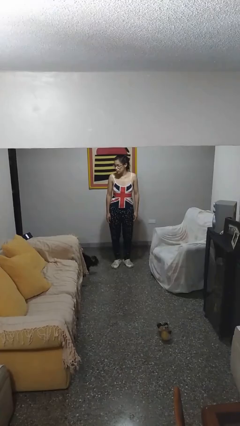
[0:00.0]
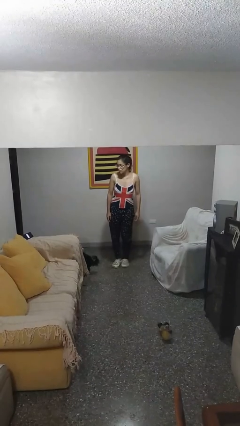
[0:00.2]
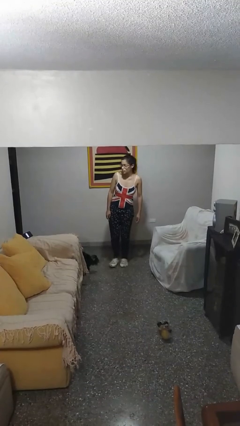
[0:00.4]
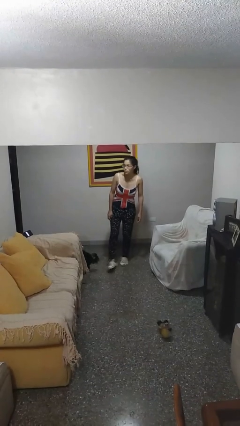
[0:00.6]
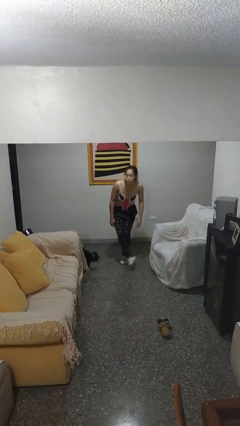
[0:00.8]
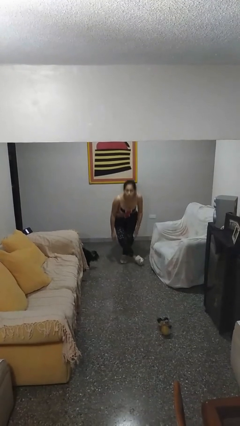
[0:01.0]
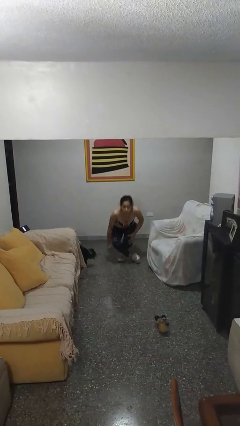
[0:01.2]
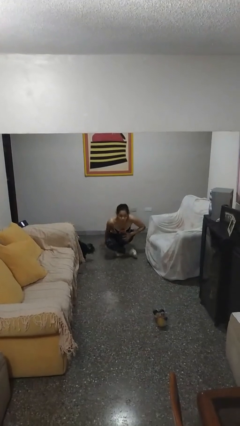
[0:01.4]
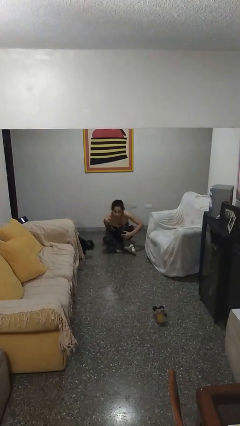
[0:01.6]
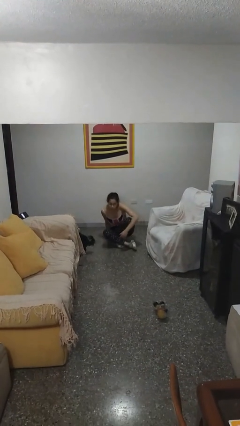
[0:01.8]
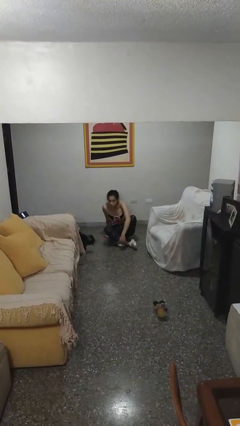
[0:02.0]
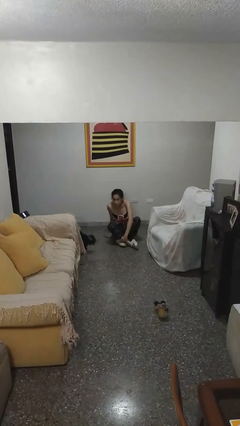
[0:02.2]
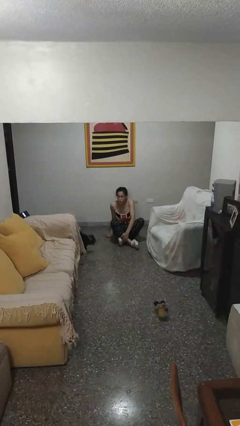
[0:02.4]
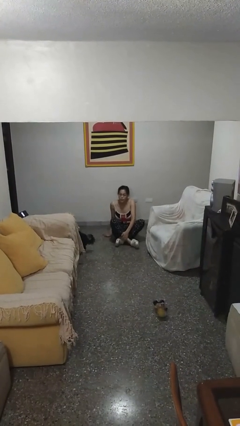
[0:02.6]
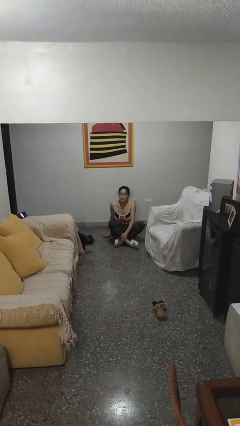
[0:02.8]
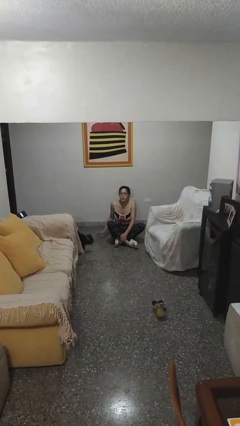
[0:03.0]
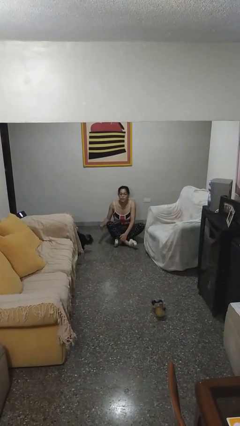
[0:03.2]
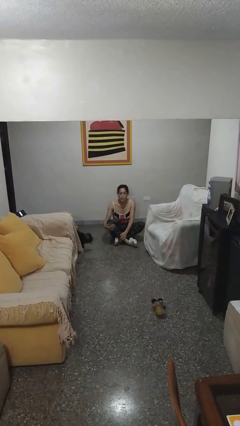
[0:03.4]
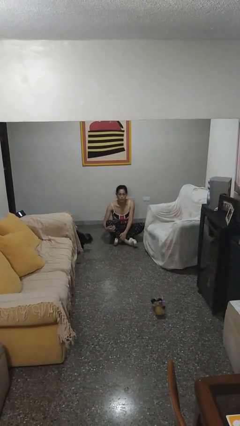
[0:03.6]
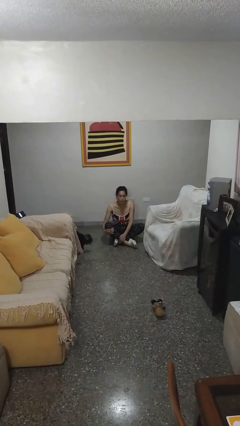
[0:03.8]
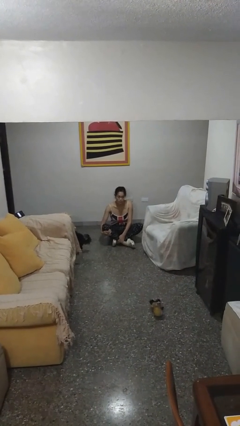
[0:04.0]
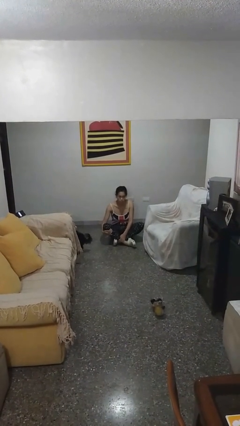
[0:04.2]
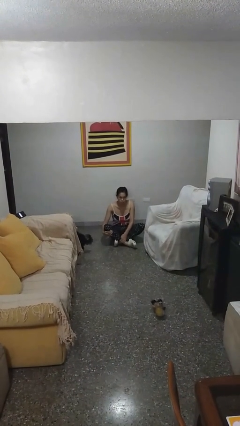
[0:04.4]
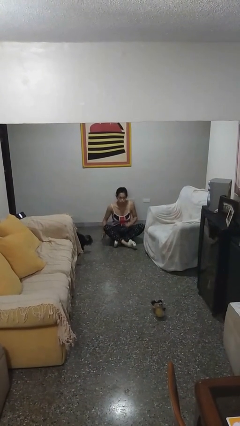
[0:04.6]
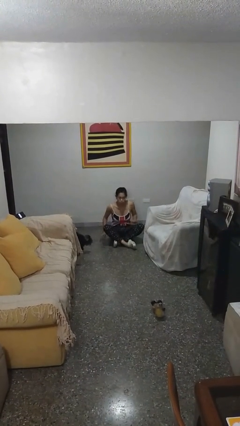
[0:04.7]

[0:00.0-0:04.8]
person sits crisscross

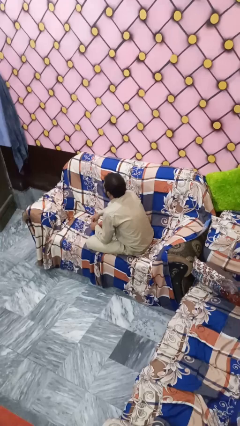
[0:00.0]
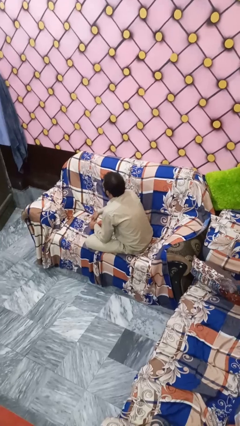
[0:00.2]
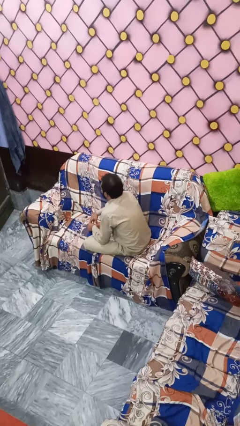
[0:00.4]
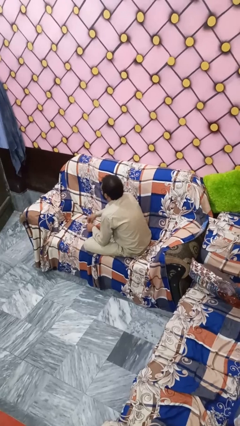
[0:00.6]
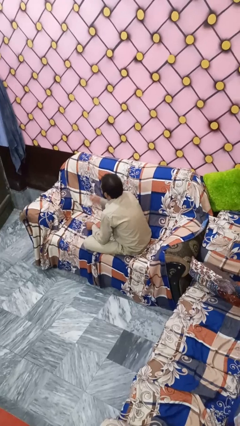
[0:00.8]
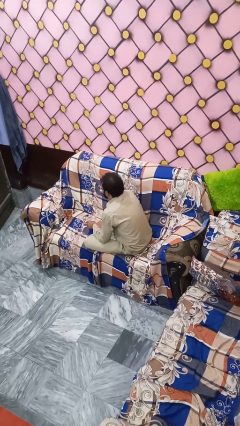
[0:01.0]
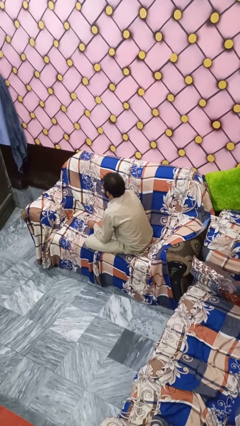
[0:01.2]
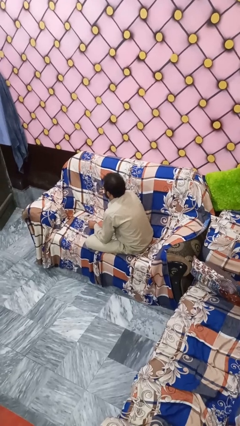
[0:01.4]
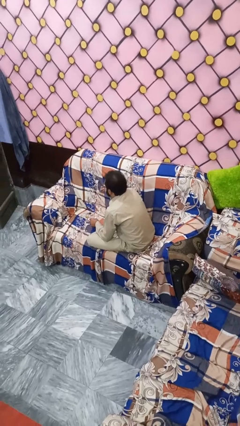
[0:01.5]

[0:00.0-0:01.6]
person blows nose

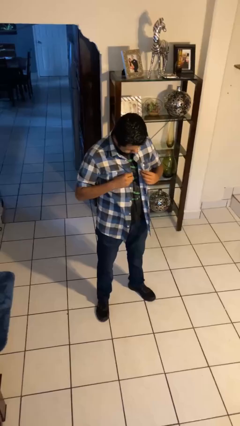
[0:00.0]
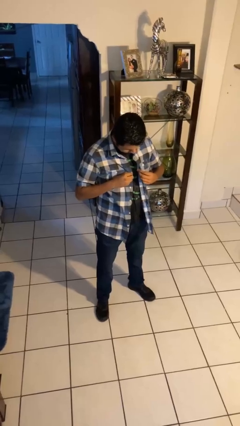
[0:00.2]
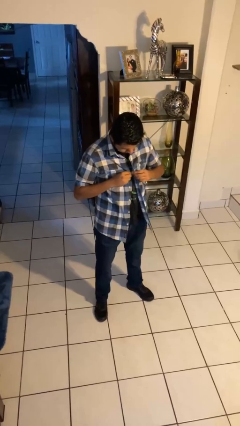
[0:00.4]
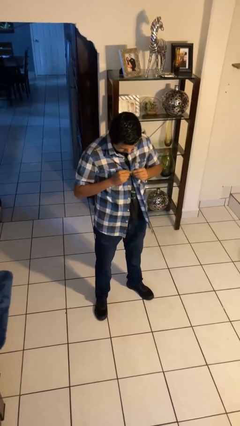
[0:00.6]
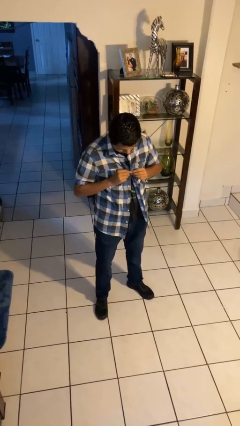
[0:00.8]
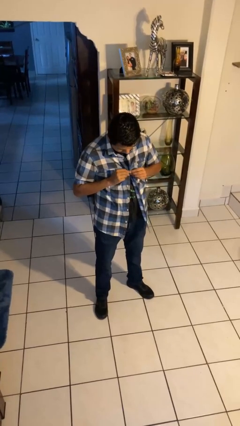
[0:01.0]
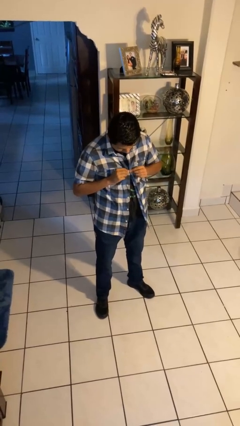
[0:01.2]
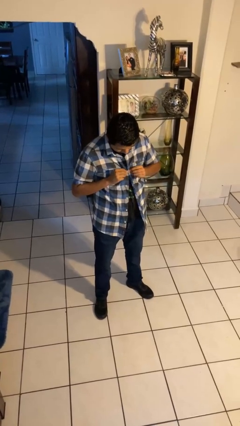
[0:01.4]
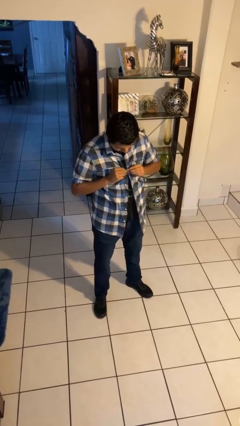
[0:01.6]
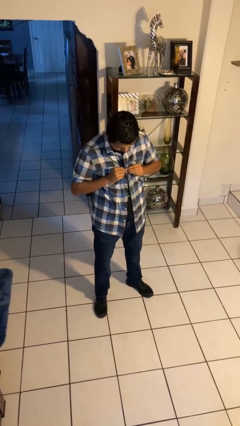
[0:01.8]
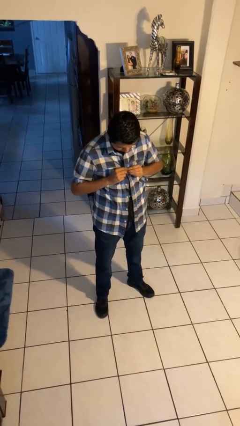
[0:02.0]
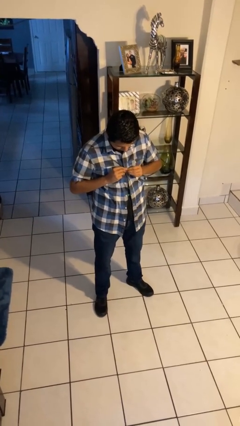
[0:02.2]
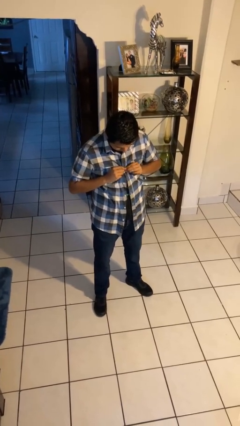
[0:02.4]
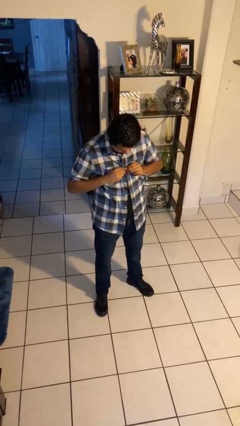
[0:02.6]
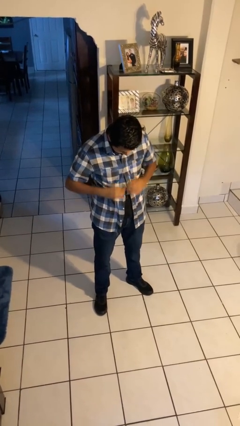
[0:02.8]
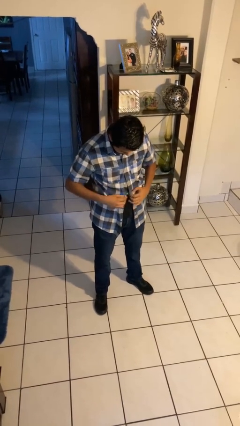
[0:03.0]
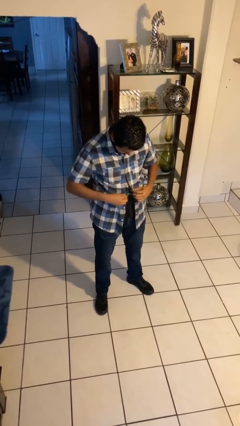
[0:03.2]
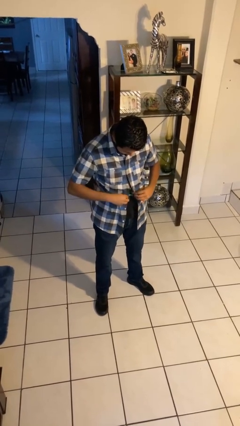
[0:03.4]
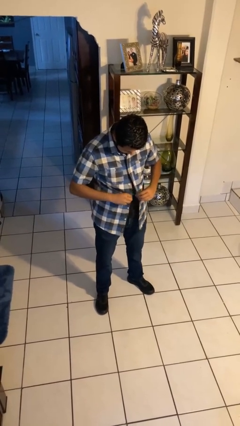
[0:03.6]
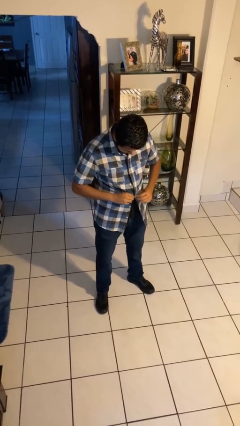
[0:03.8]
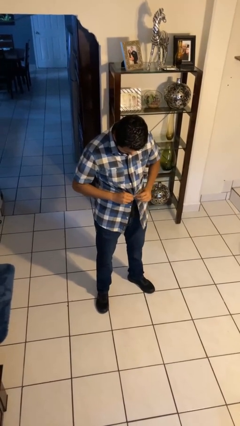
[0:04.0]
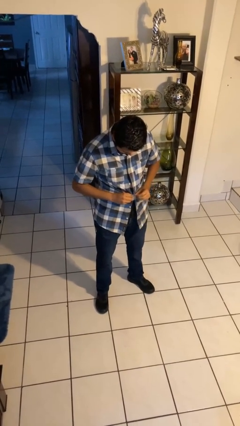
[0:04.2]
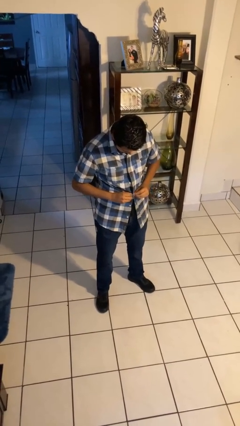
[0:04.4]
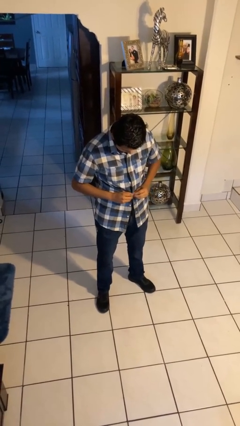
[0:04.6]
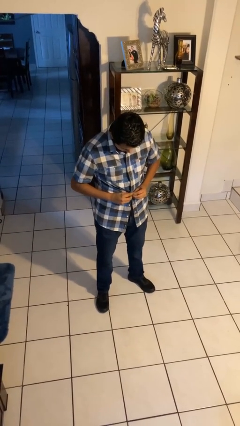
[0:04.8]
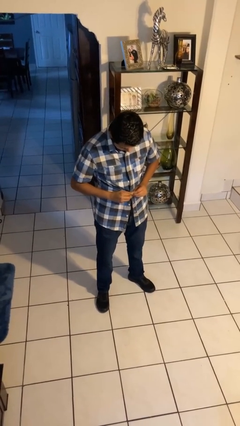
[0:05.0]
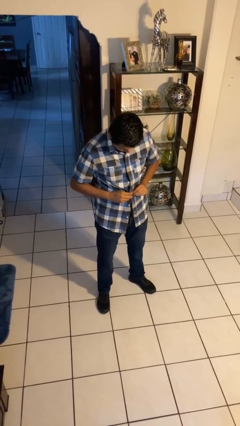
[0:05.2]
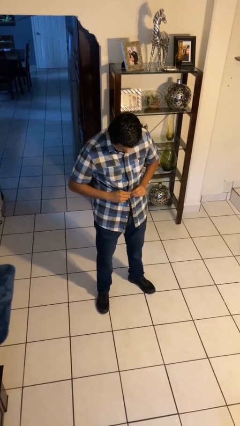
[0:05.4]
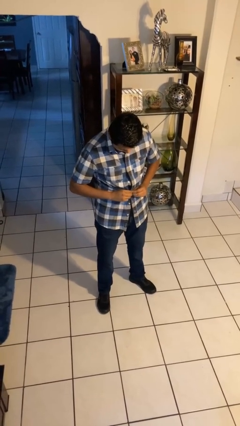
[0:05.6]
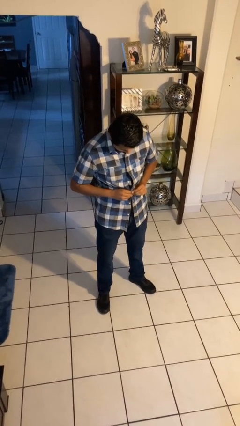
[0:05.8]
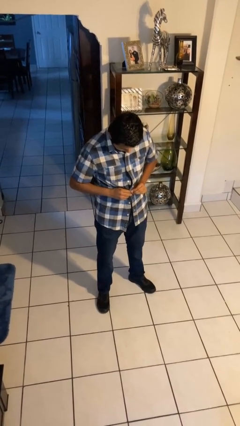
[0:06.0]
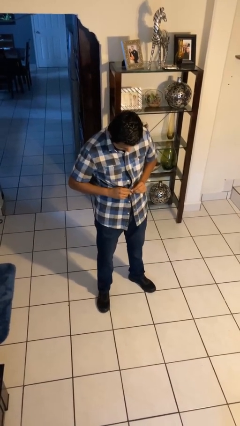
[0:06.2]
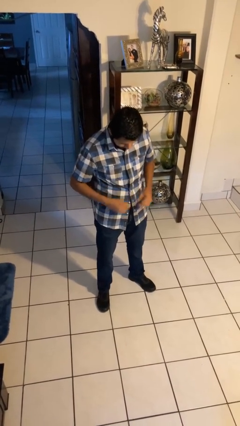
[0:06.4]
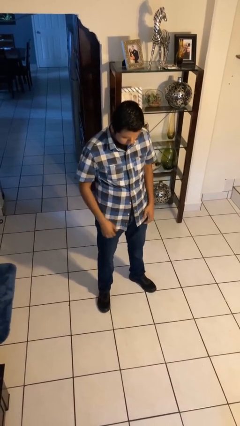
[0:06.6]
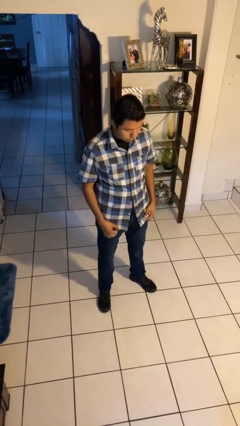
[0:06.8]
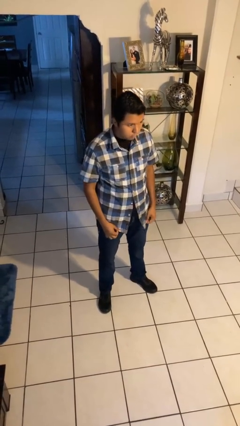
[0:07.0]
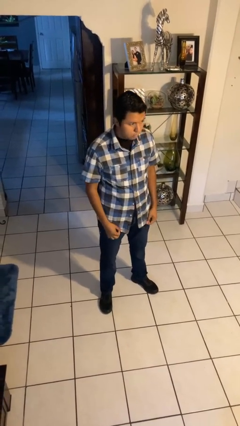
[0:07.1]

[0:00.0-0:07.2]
person buttons shirt

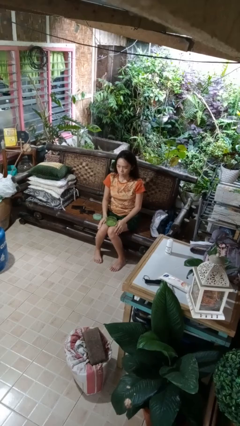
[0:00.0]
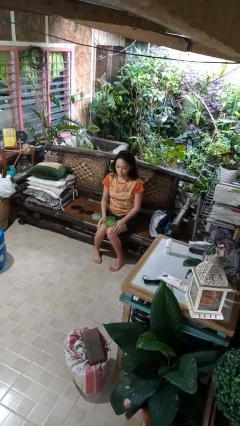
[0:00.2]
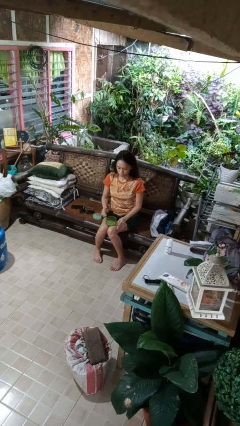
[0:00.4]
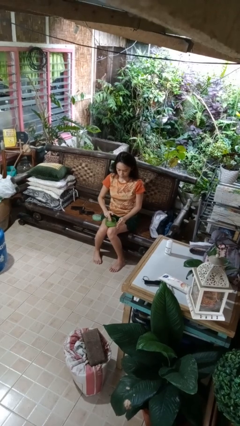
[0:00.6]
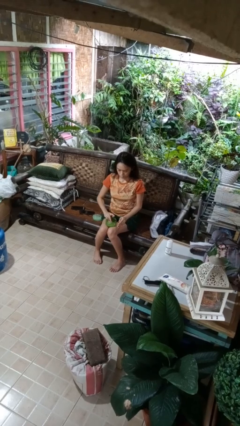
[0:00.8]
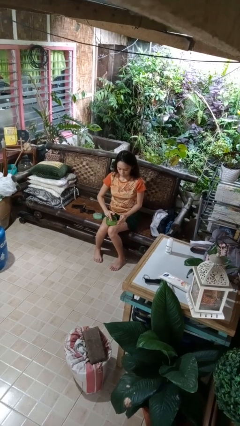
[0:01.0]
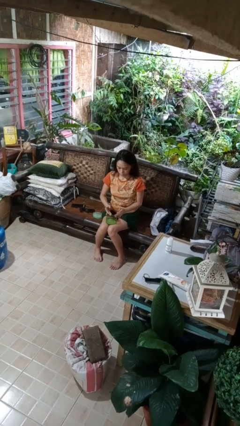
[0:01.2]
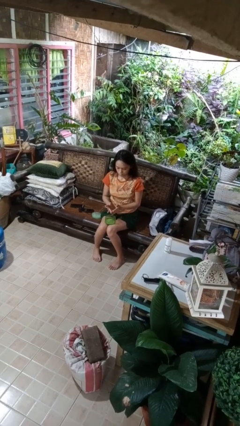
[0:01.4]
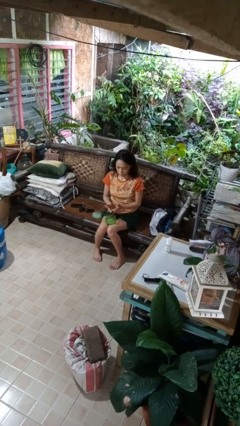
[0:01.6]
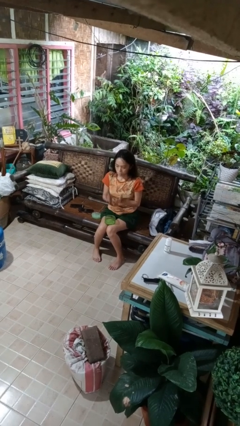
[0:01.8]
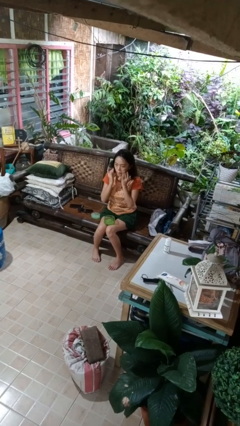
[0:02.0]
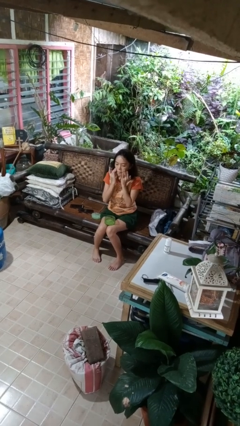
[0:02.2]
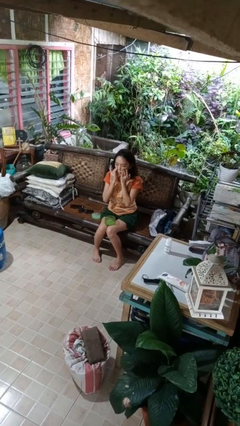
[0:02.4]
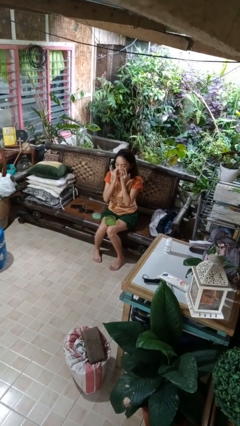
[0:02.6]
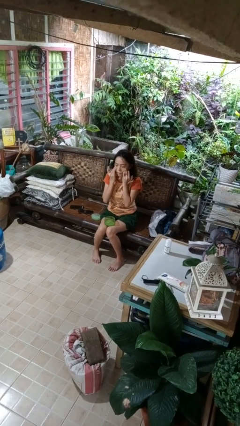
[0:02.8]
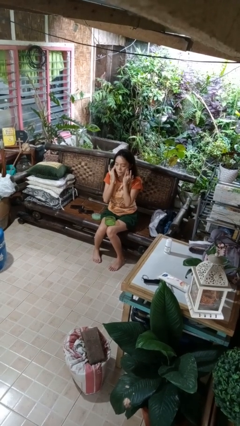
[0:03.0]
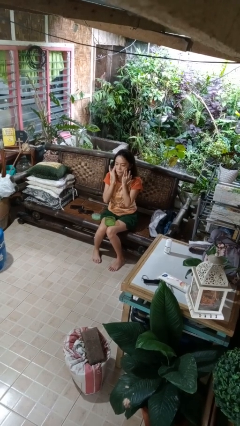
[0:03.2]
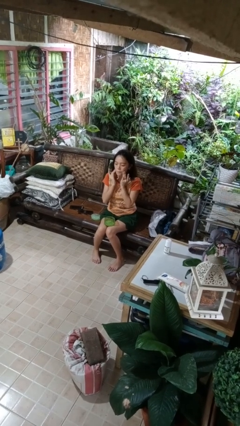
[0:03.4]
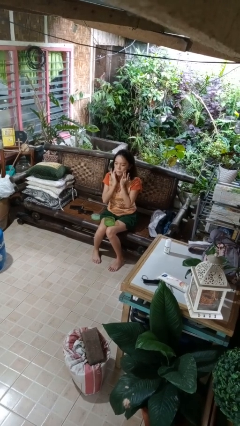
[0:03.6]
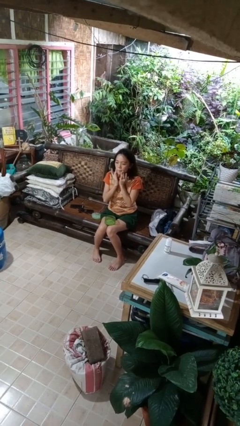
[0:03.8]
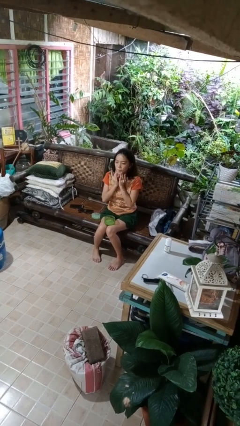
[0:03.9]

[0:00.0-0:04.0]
person applies facial moisturizer

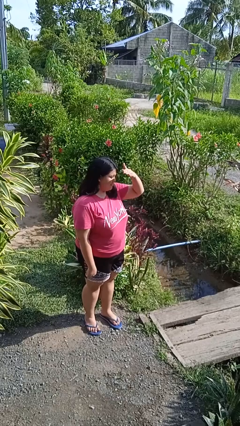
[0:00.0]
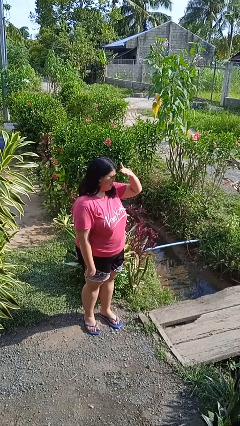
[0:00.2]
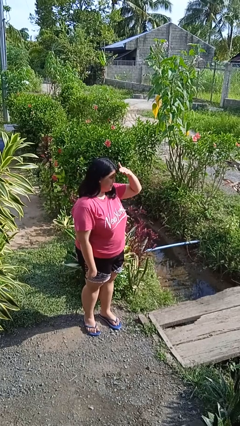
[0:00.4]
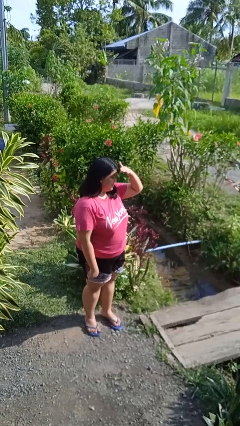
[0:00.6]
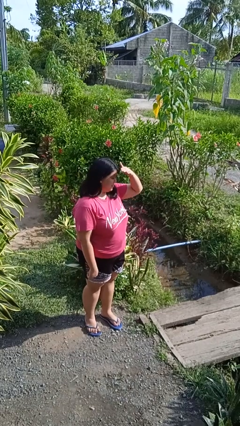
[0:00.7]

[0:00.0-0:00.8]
person shades eyes
